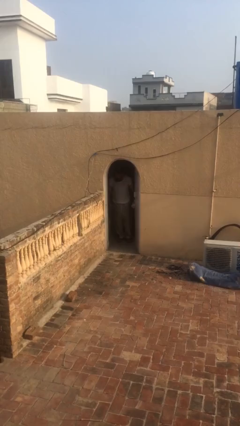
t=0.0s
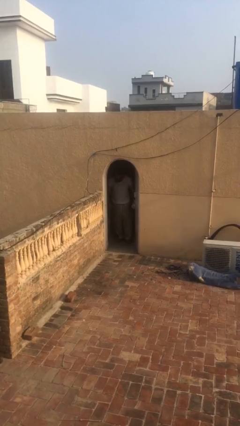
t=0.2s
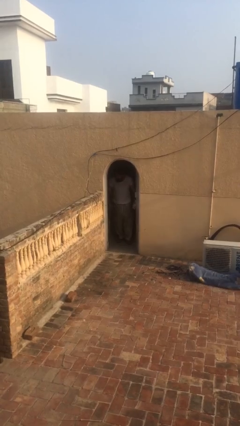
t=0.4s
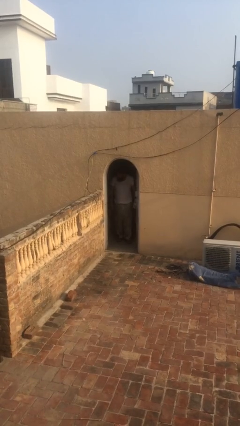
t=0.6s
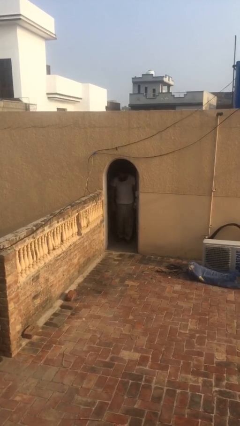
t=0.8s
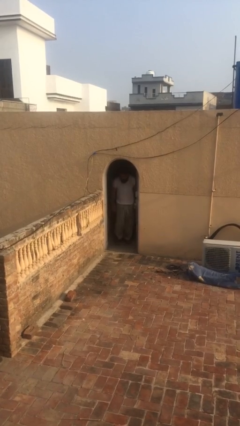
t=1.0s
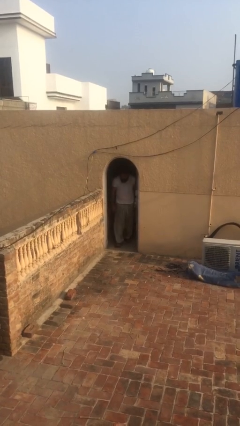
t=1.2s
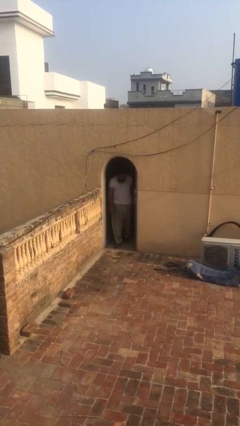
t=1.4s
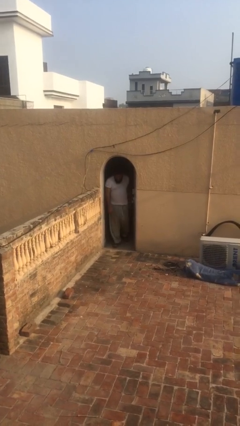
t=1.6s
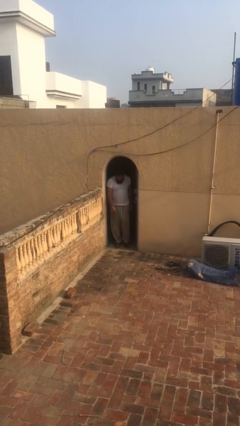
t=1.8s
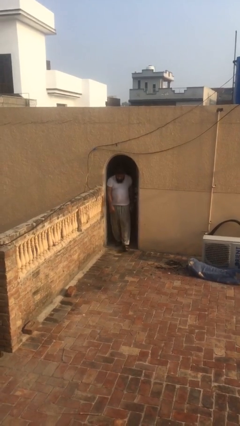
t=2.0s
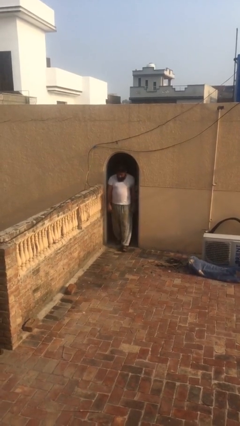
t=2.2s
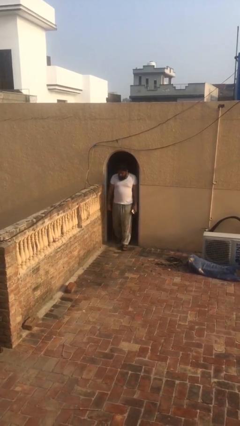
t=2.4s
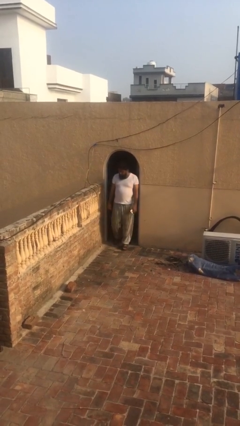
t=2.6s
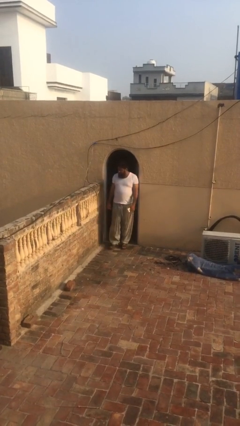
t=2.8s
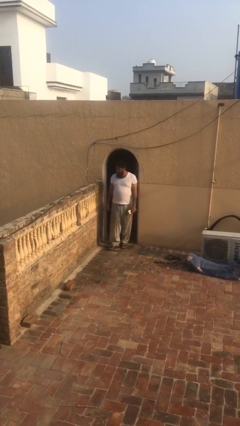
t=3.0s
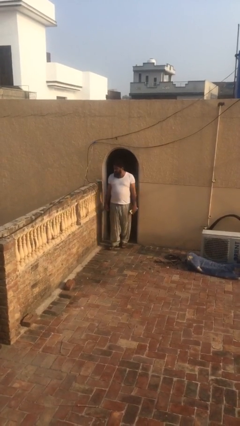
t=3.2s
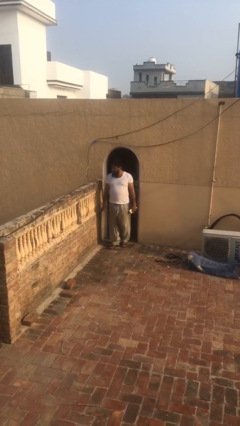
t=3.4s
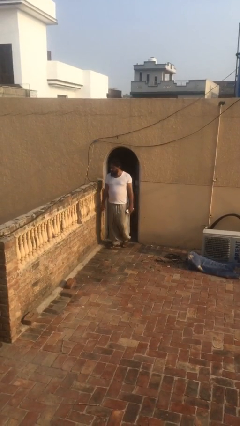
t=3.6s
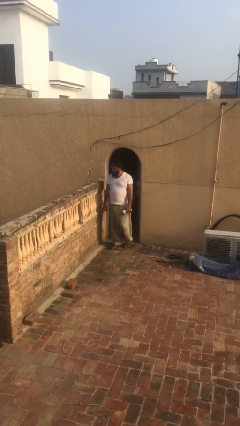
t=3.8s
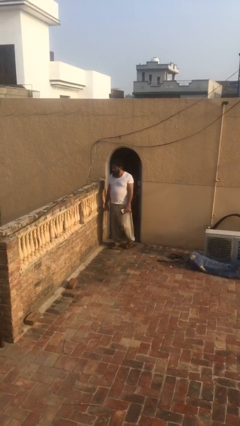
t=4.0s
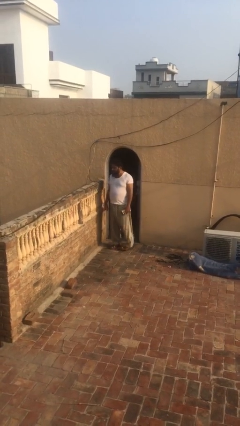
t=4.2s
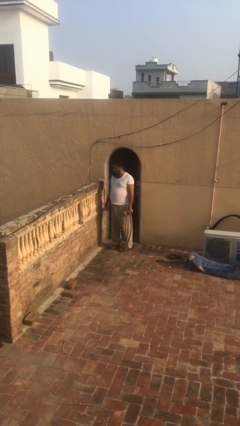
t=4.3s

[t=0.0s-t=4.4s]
person enters scene through structure

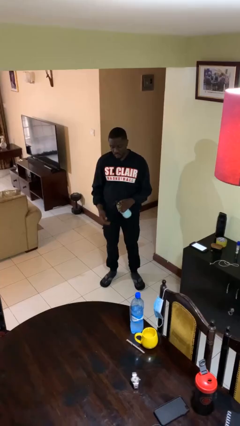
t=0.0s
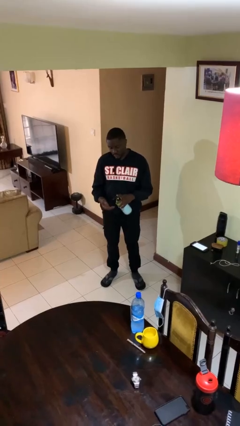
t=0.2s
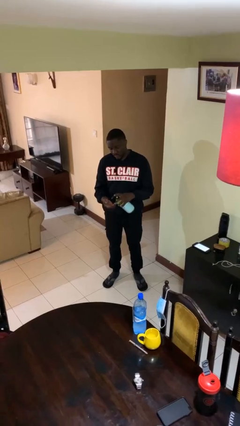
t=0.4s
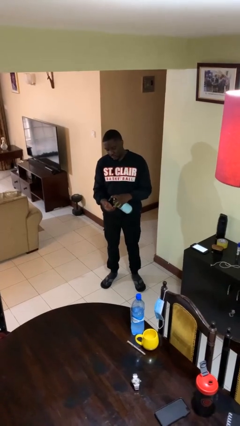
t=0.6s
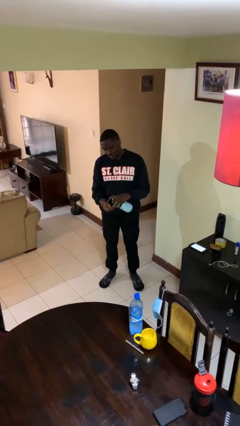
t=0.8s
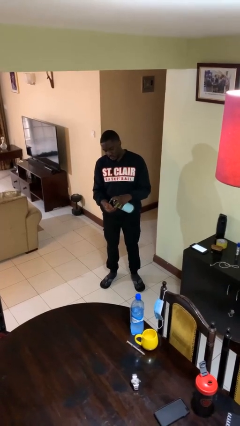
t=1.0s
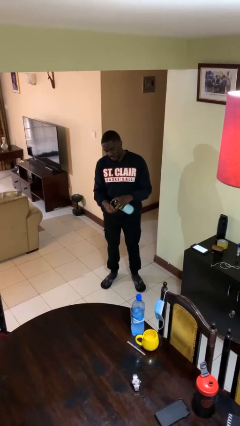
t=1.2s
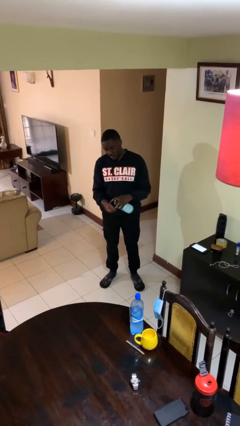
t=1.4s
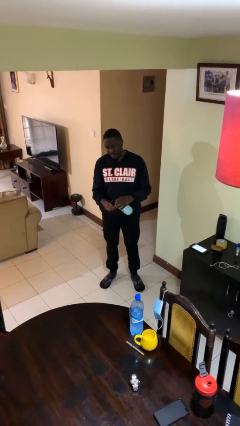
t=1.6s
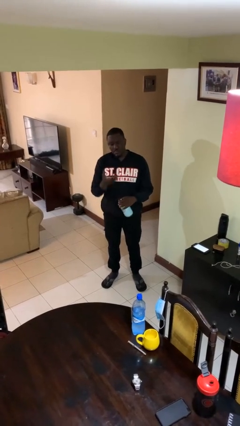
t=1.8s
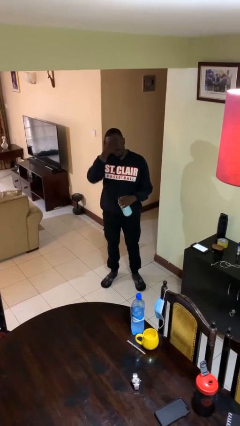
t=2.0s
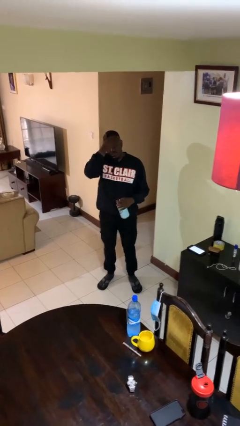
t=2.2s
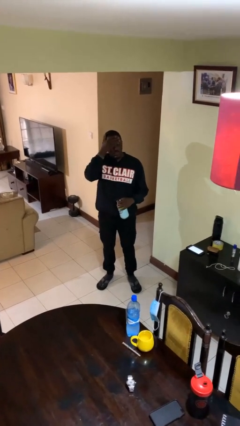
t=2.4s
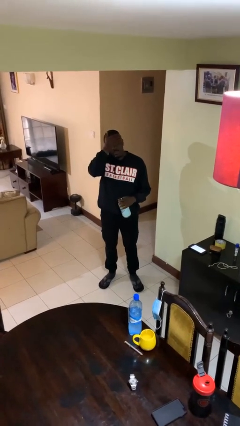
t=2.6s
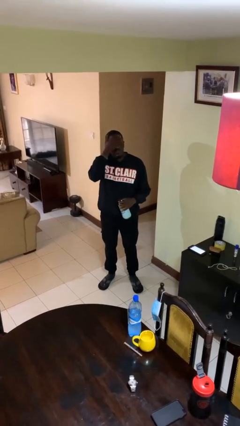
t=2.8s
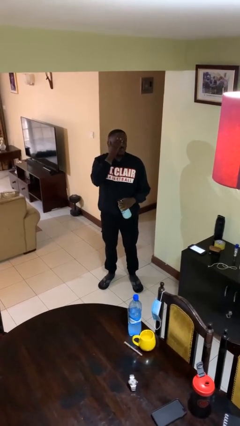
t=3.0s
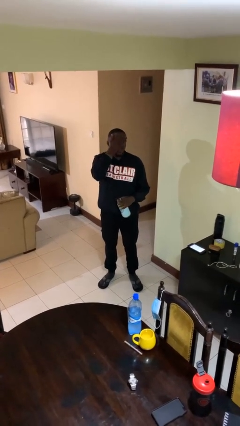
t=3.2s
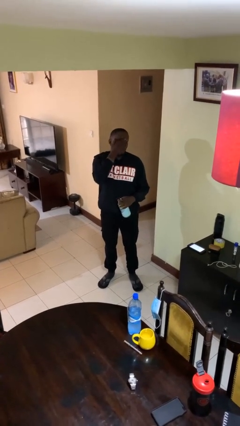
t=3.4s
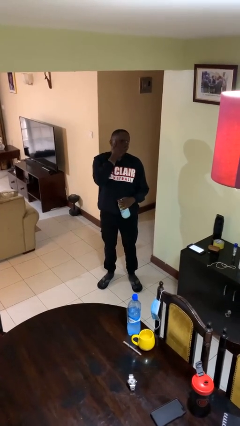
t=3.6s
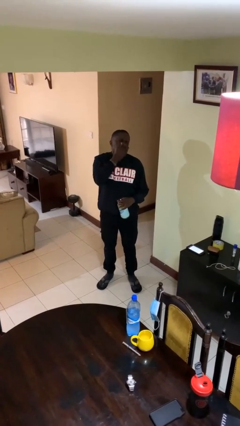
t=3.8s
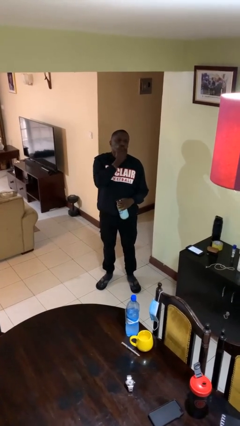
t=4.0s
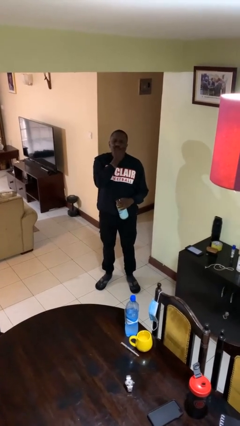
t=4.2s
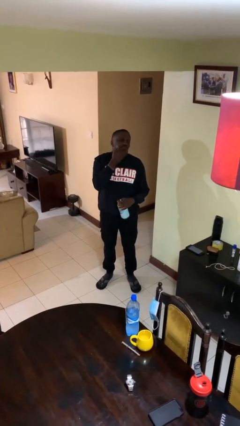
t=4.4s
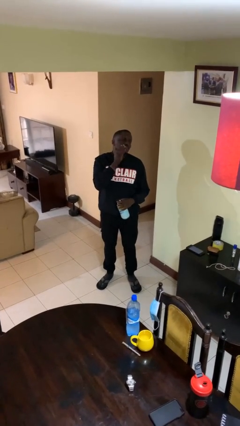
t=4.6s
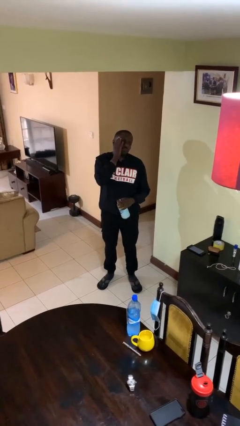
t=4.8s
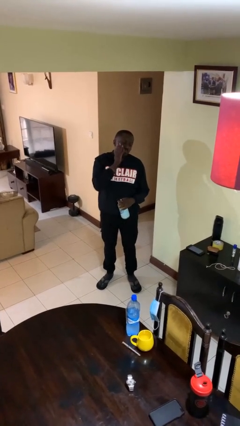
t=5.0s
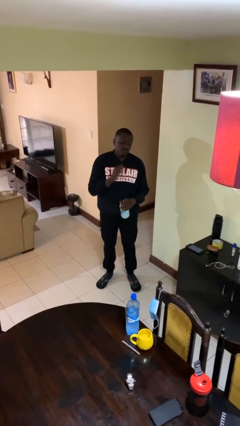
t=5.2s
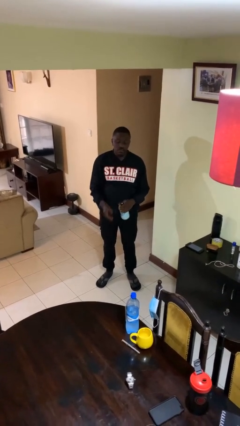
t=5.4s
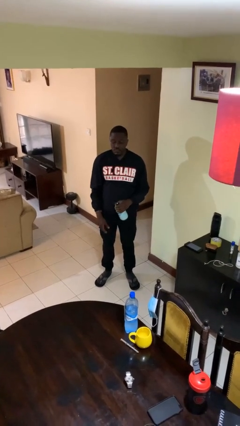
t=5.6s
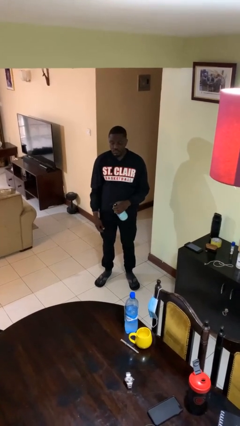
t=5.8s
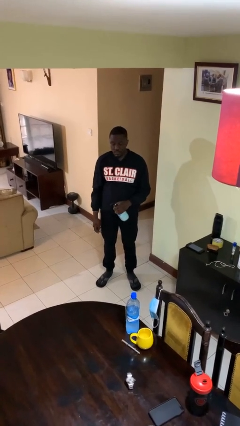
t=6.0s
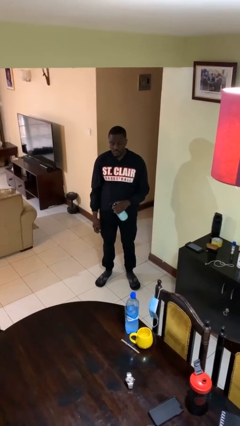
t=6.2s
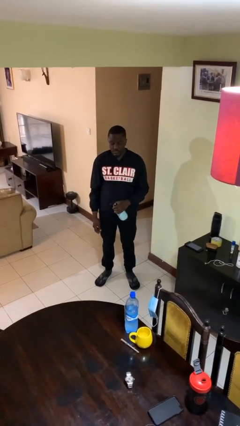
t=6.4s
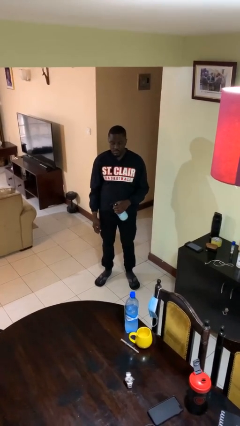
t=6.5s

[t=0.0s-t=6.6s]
person applies facial moisturizer

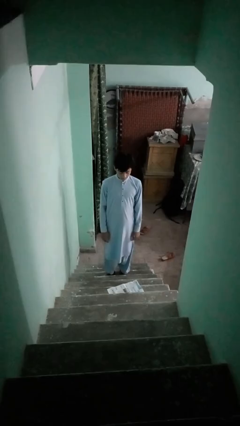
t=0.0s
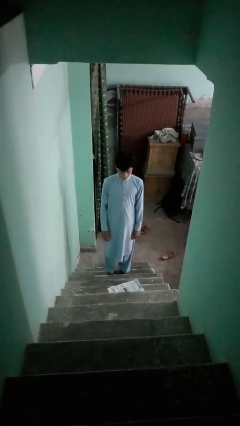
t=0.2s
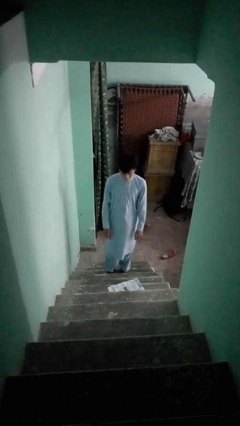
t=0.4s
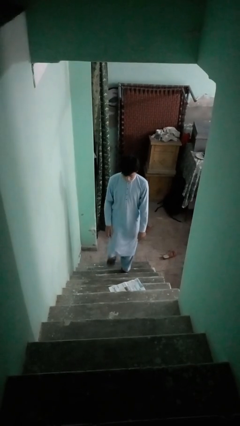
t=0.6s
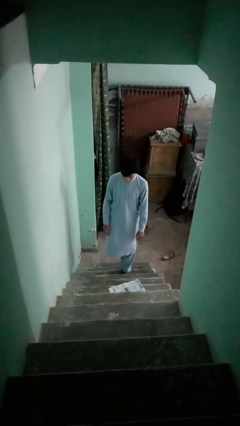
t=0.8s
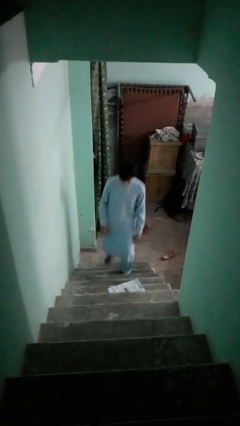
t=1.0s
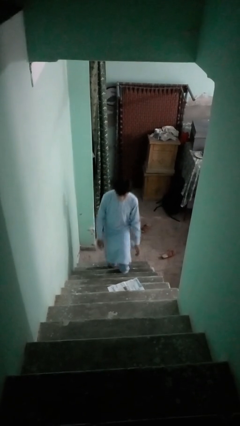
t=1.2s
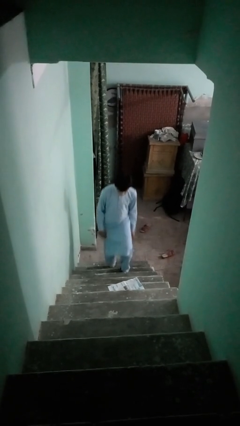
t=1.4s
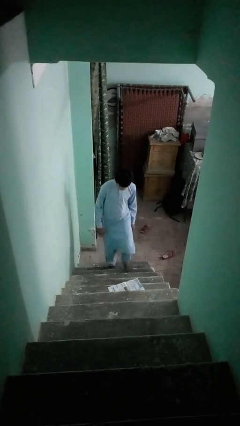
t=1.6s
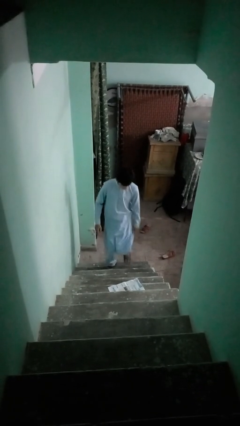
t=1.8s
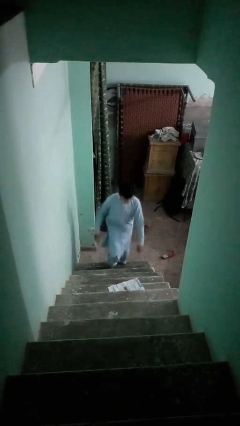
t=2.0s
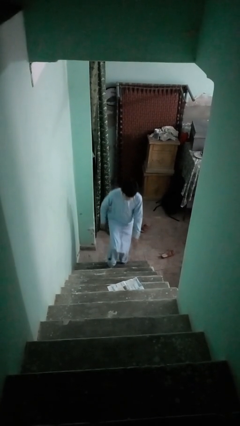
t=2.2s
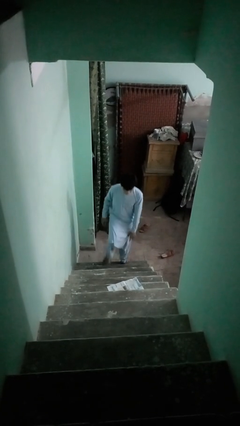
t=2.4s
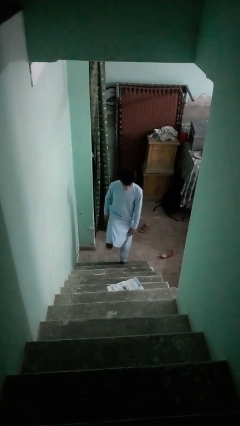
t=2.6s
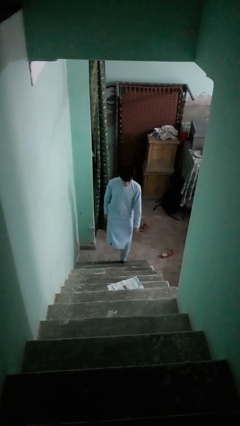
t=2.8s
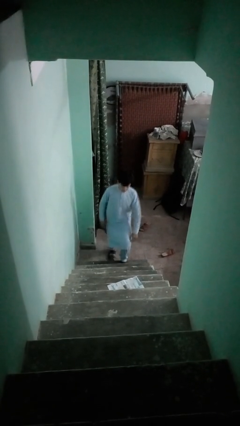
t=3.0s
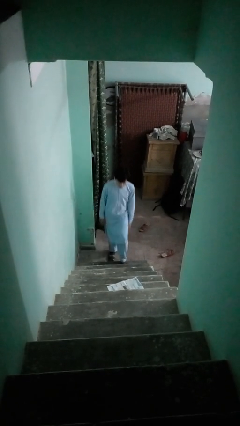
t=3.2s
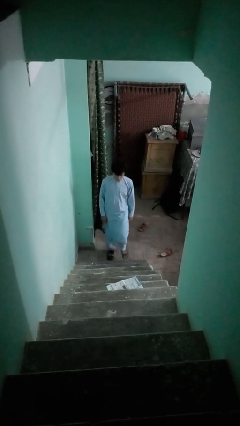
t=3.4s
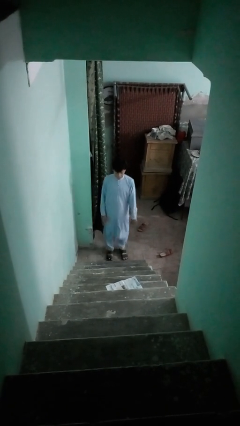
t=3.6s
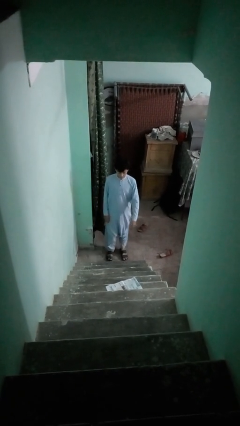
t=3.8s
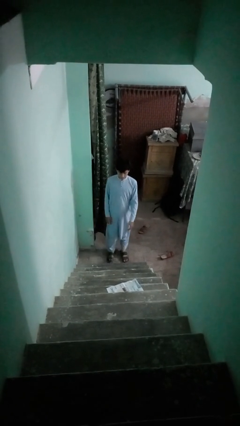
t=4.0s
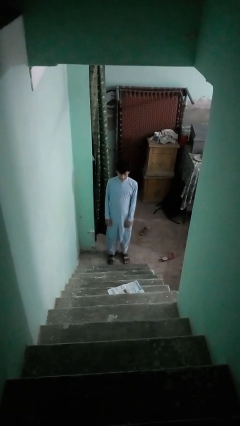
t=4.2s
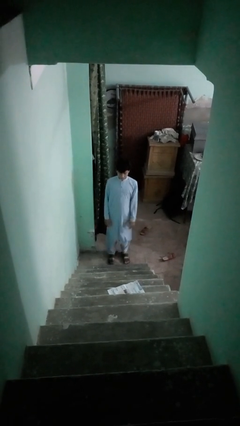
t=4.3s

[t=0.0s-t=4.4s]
person climbs down stairs

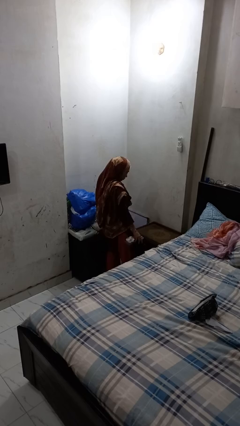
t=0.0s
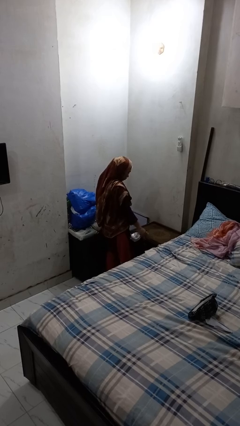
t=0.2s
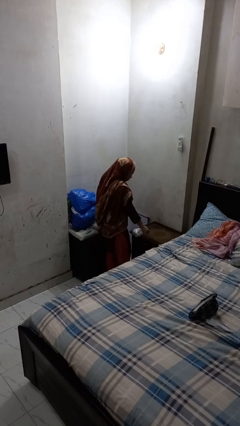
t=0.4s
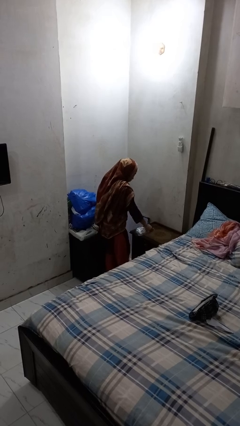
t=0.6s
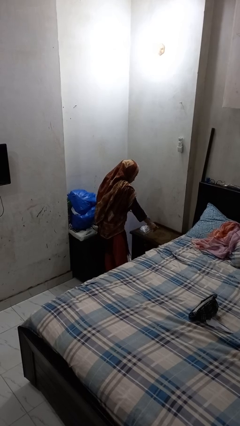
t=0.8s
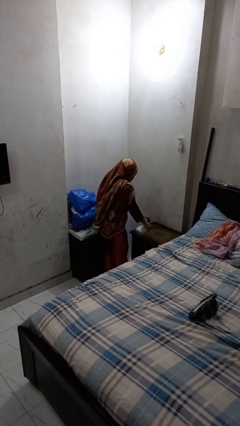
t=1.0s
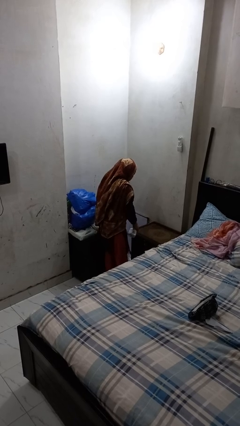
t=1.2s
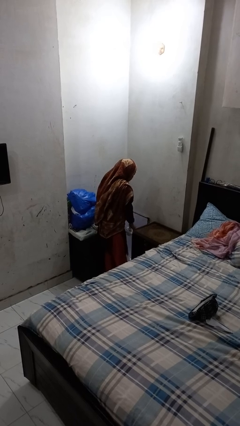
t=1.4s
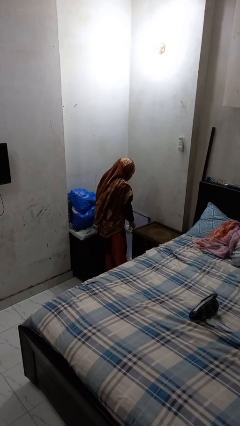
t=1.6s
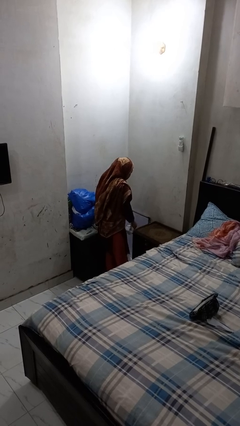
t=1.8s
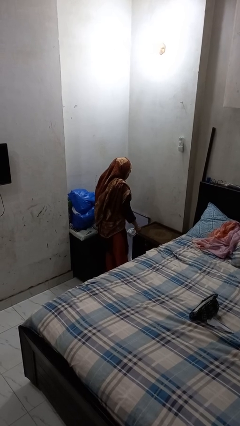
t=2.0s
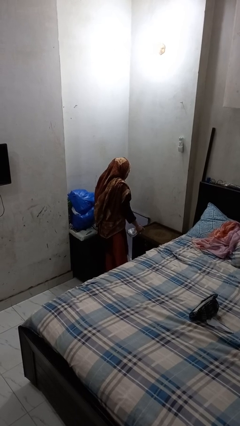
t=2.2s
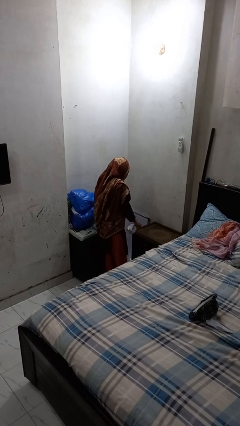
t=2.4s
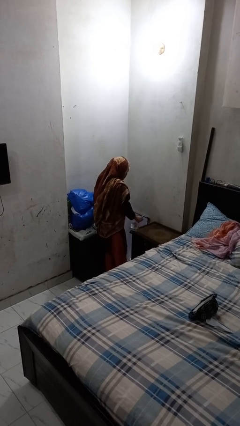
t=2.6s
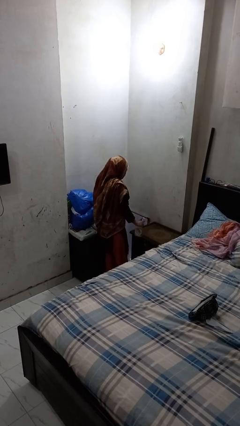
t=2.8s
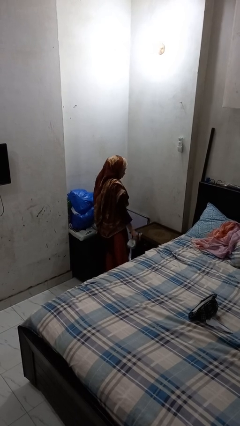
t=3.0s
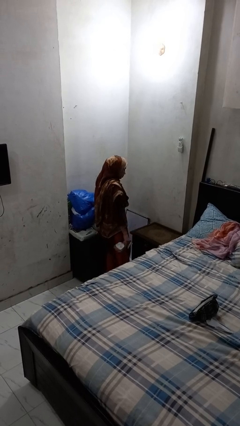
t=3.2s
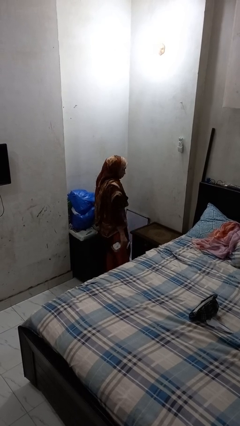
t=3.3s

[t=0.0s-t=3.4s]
person sprays from bottle
